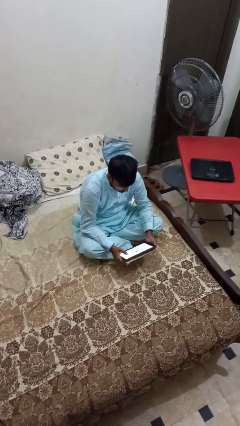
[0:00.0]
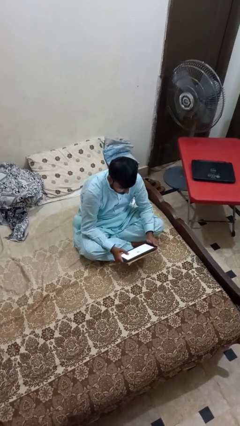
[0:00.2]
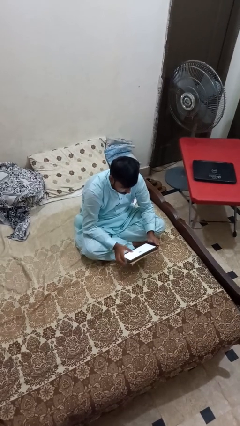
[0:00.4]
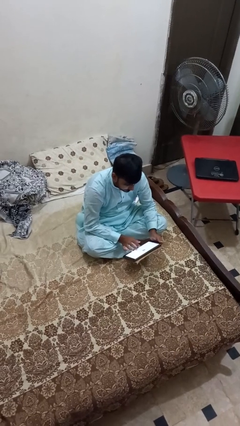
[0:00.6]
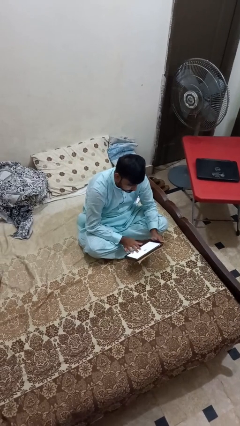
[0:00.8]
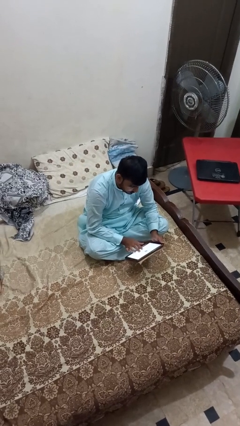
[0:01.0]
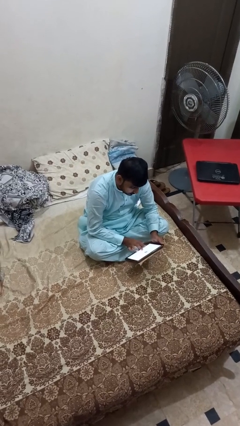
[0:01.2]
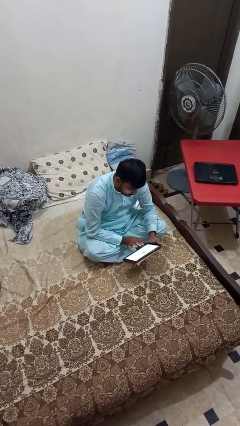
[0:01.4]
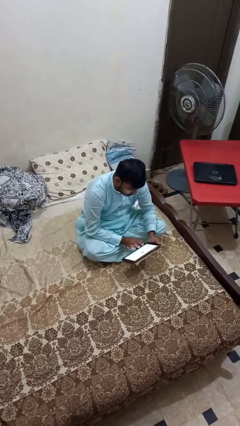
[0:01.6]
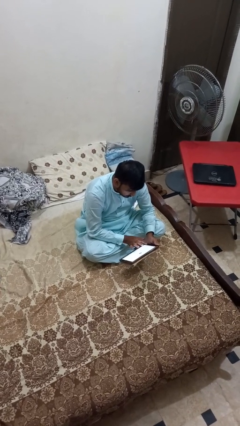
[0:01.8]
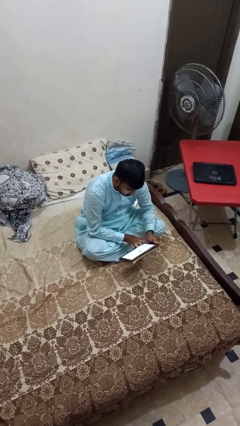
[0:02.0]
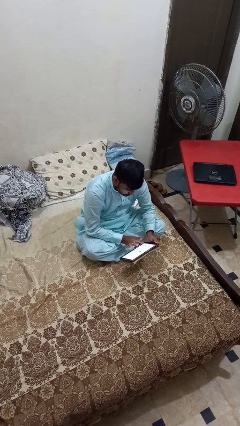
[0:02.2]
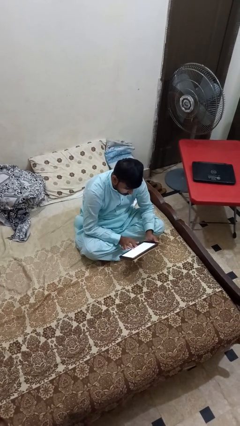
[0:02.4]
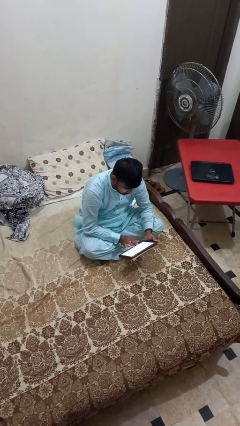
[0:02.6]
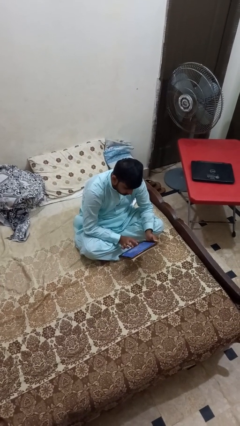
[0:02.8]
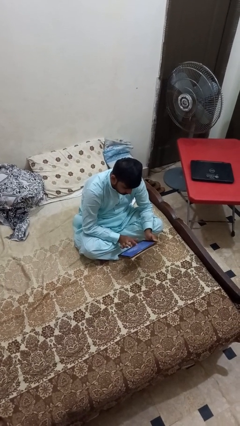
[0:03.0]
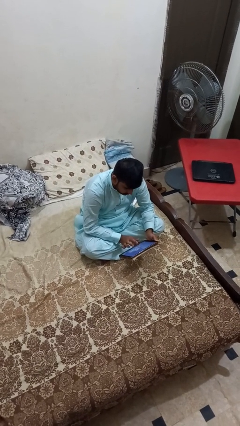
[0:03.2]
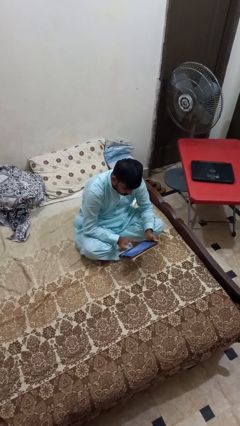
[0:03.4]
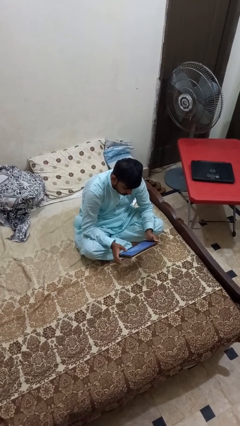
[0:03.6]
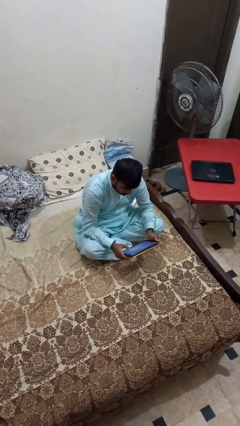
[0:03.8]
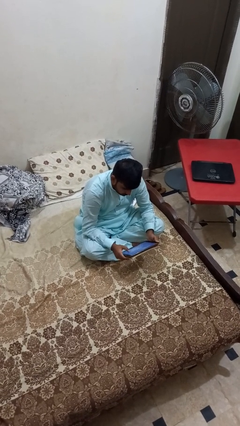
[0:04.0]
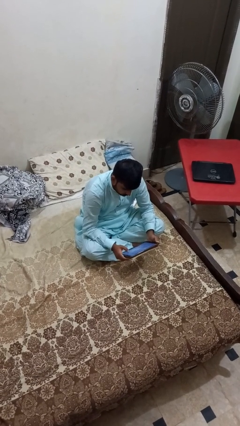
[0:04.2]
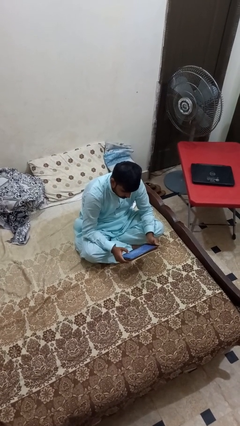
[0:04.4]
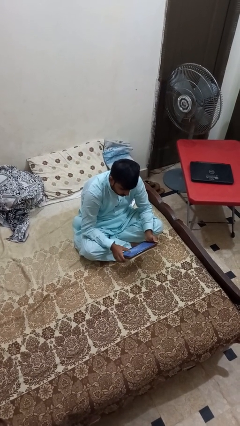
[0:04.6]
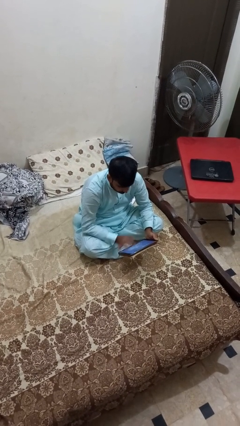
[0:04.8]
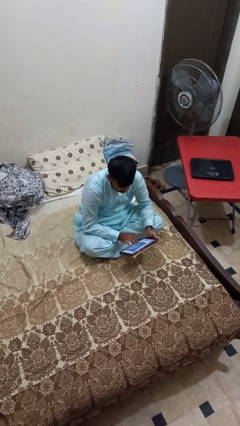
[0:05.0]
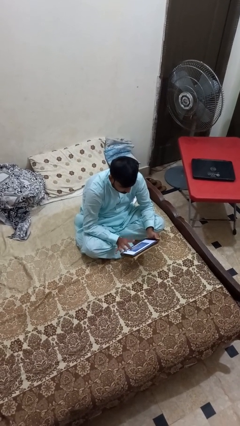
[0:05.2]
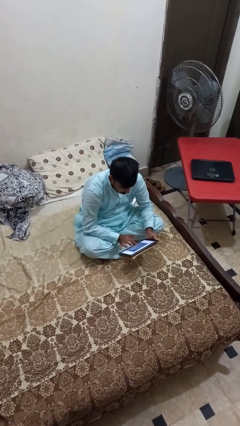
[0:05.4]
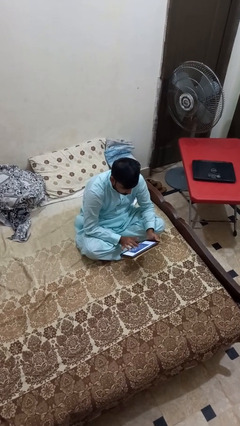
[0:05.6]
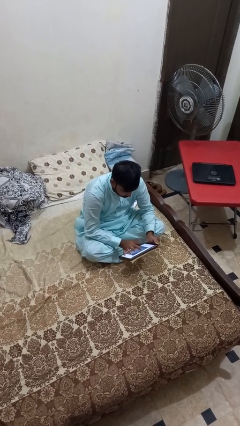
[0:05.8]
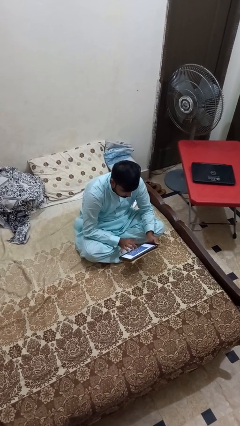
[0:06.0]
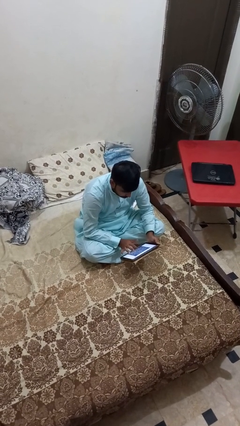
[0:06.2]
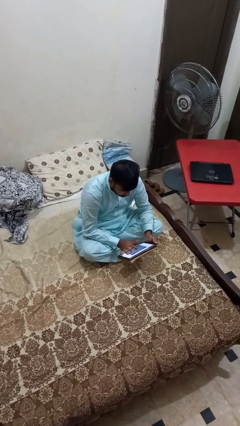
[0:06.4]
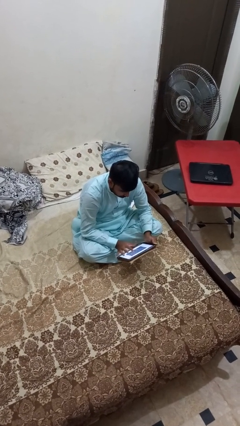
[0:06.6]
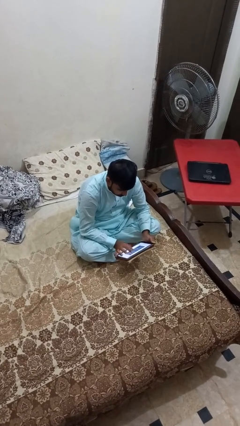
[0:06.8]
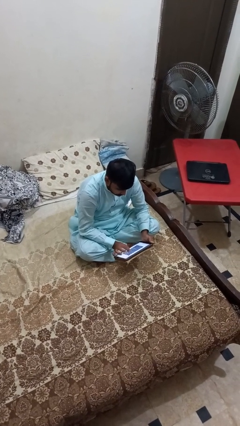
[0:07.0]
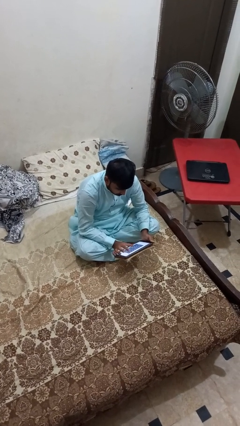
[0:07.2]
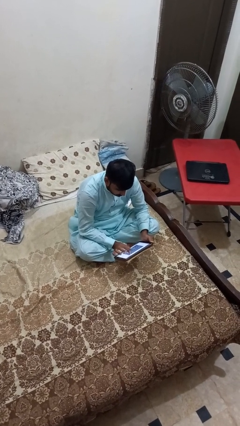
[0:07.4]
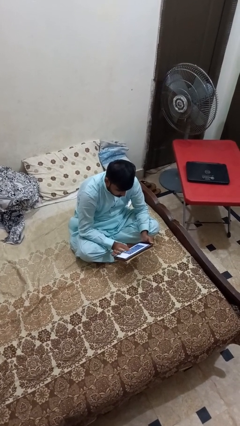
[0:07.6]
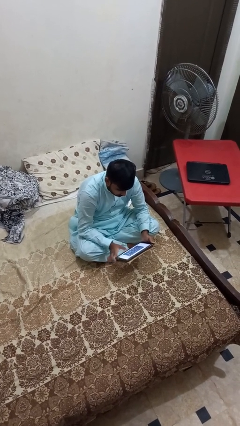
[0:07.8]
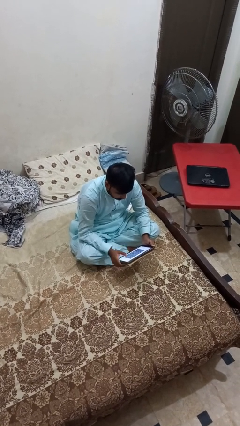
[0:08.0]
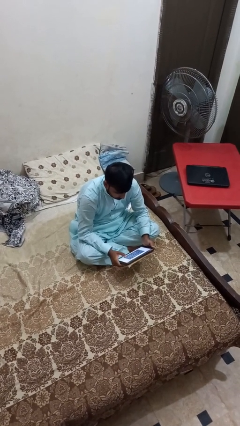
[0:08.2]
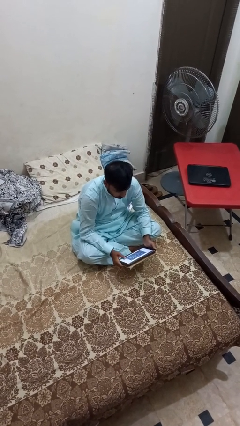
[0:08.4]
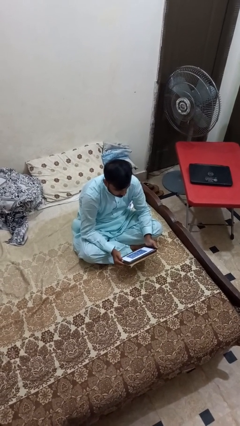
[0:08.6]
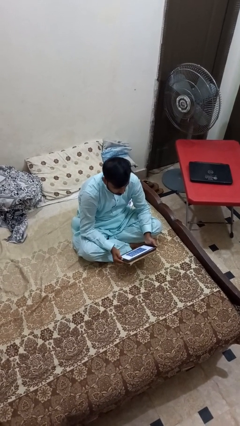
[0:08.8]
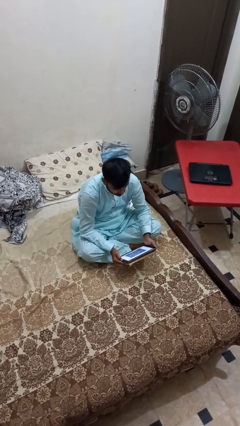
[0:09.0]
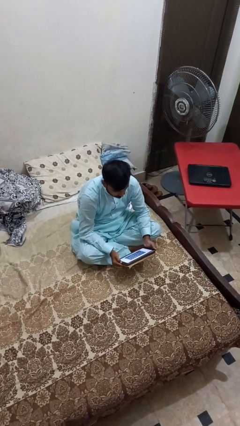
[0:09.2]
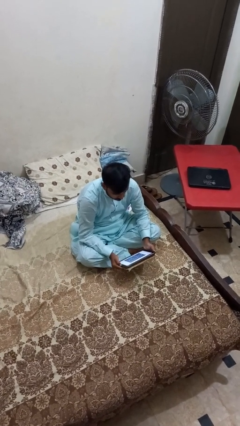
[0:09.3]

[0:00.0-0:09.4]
person interacts with tablet

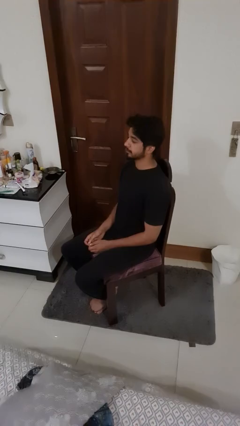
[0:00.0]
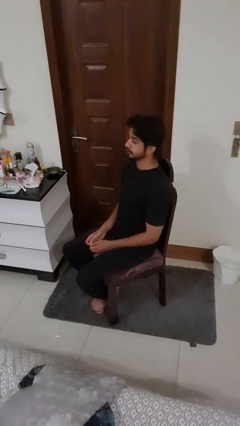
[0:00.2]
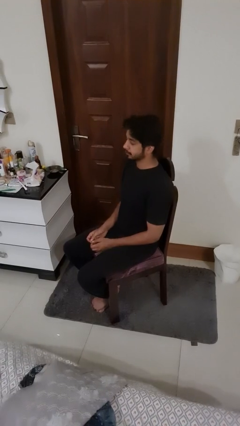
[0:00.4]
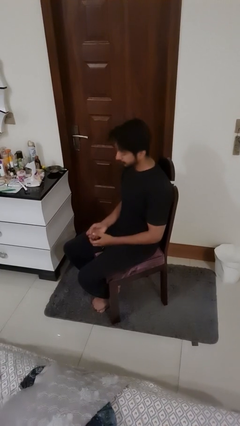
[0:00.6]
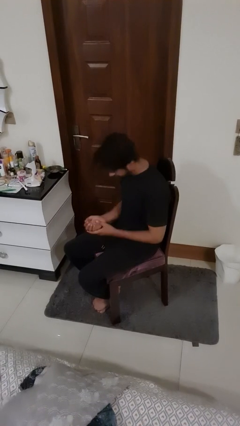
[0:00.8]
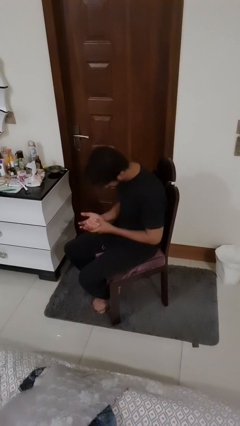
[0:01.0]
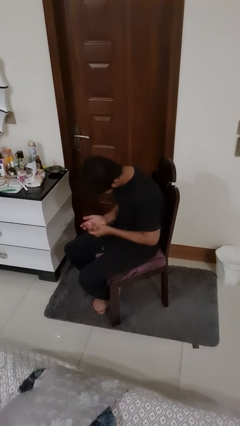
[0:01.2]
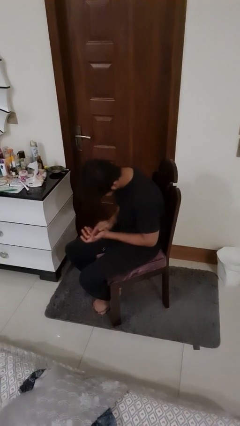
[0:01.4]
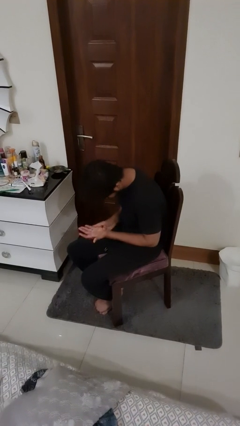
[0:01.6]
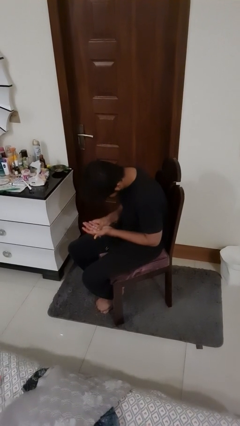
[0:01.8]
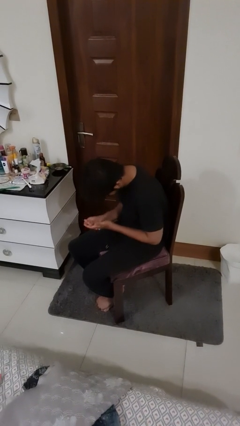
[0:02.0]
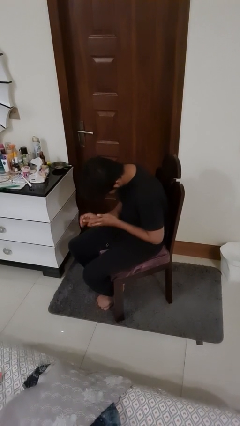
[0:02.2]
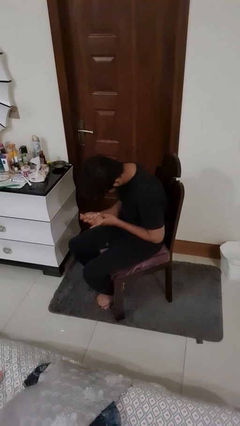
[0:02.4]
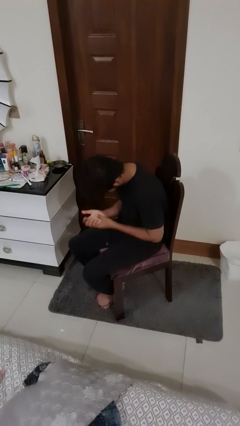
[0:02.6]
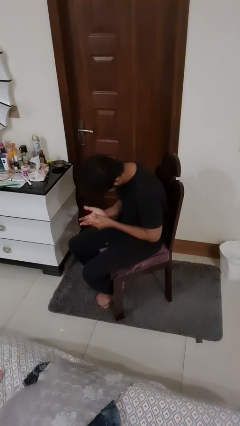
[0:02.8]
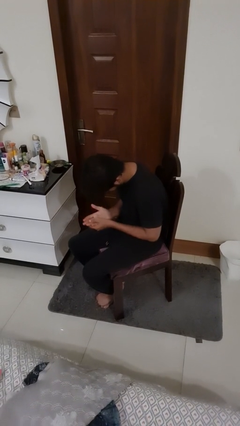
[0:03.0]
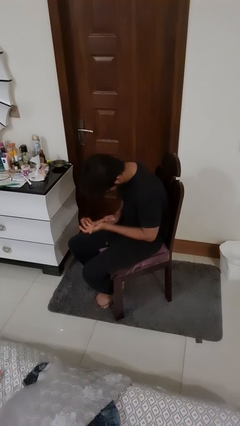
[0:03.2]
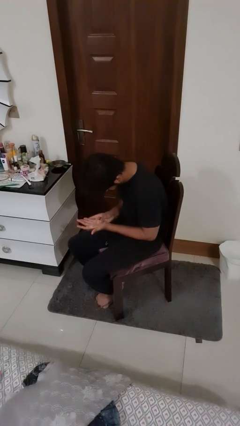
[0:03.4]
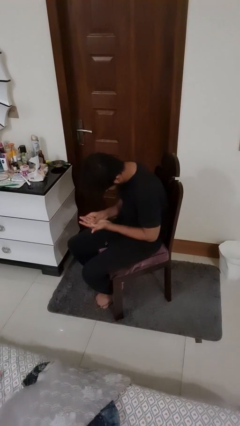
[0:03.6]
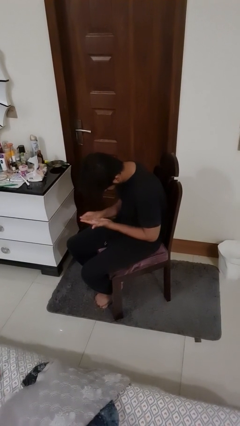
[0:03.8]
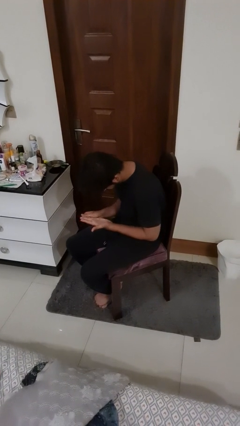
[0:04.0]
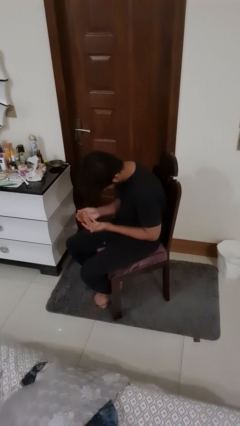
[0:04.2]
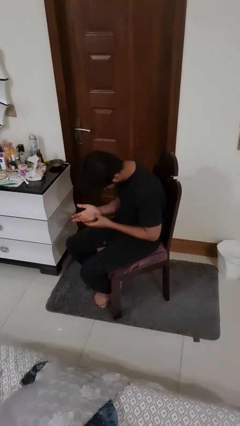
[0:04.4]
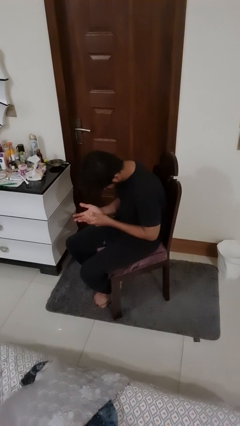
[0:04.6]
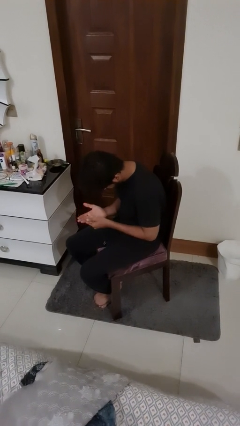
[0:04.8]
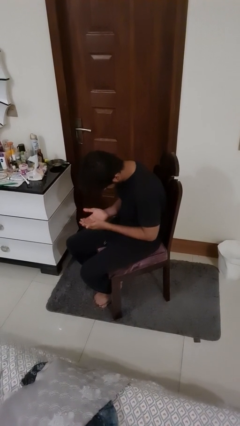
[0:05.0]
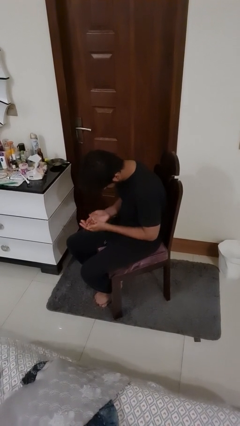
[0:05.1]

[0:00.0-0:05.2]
person looks at hands in lap

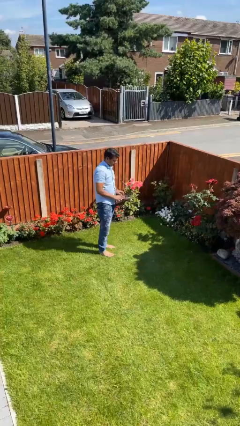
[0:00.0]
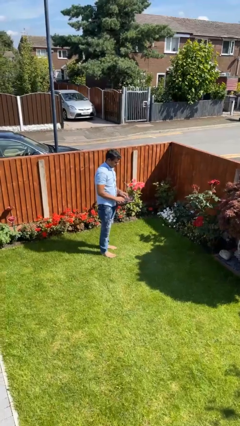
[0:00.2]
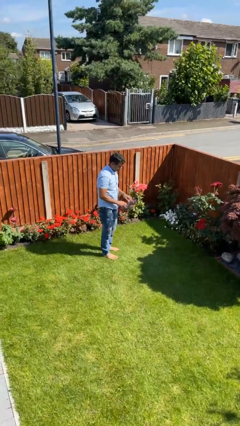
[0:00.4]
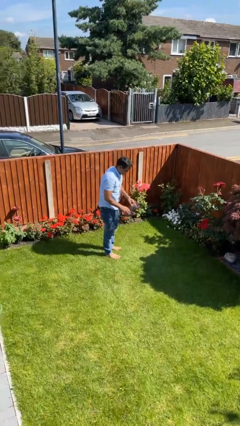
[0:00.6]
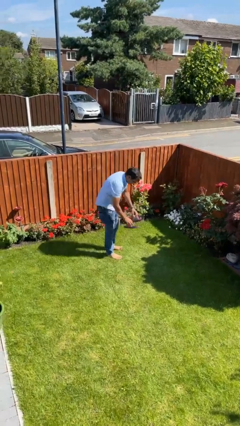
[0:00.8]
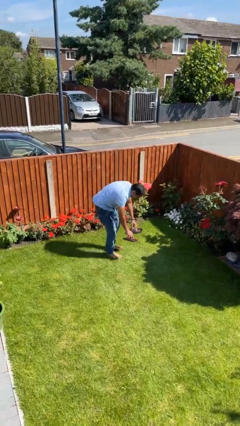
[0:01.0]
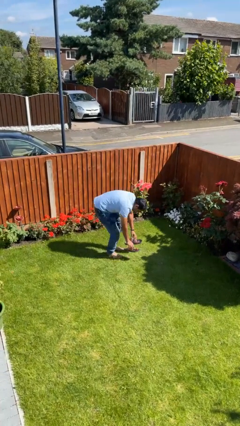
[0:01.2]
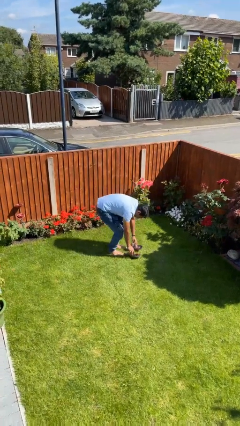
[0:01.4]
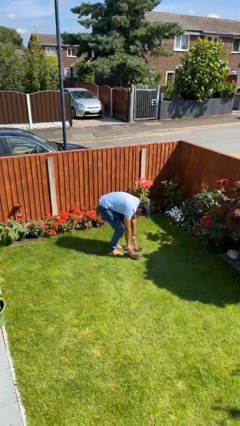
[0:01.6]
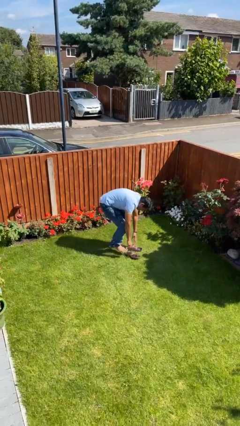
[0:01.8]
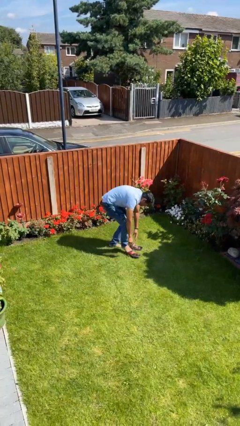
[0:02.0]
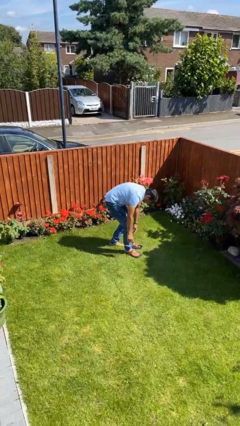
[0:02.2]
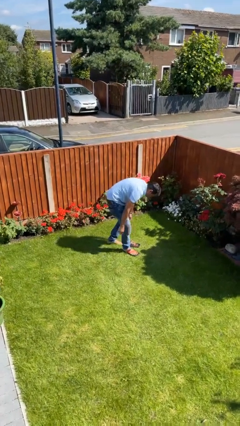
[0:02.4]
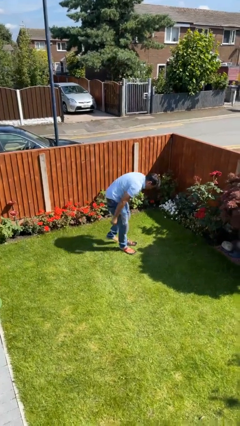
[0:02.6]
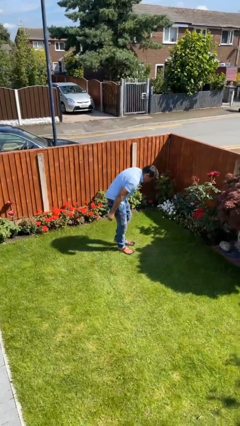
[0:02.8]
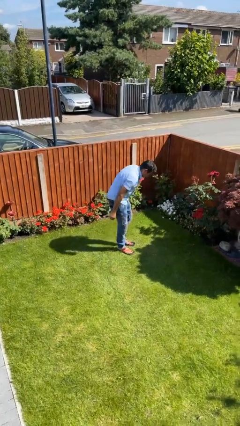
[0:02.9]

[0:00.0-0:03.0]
person puts on shoes
